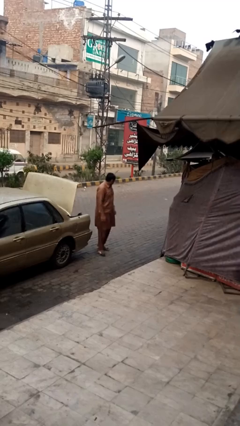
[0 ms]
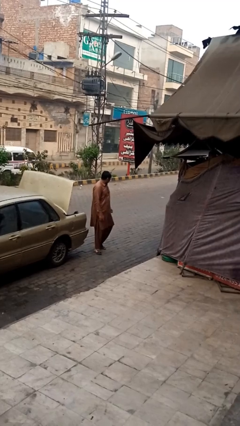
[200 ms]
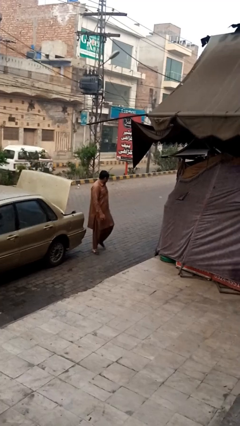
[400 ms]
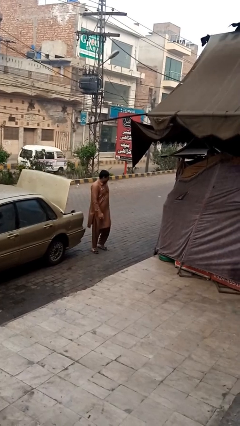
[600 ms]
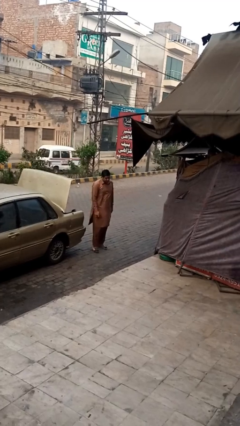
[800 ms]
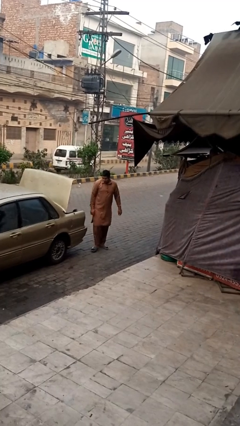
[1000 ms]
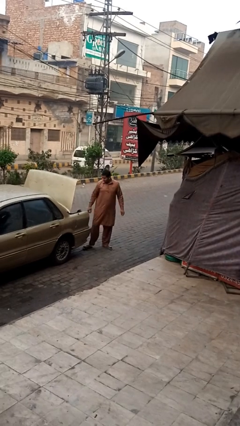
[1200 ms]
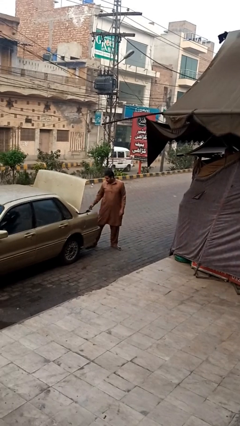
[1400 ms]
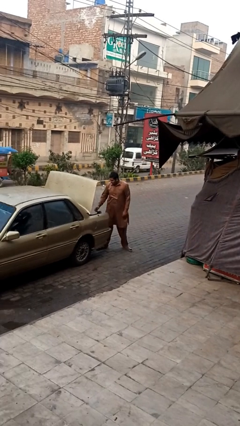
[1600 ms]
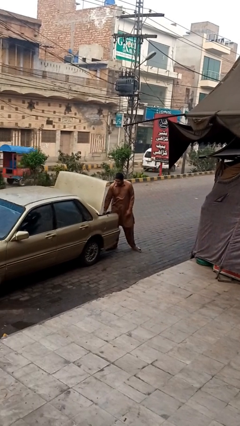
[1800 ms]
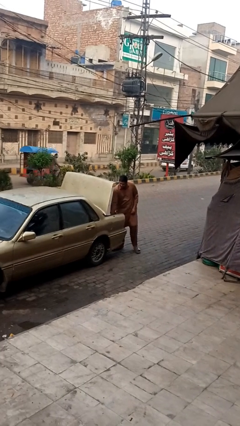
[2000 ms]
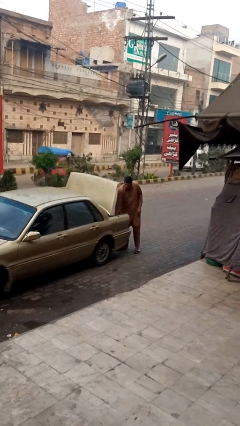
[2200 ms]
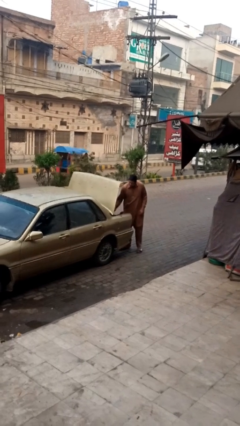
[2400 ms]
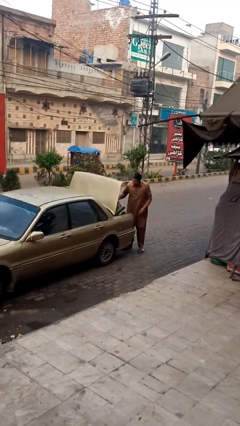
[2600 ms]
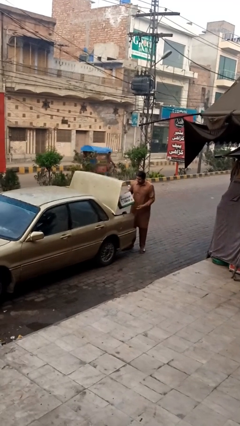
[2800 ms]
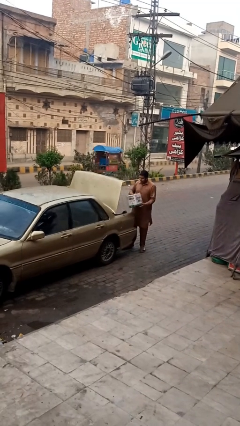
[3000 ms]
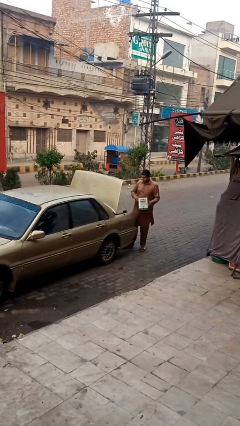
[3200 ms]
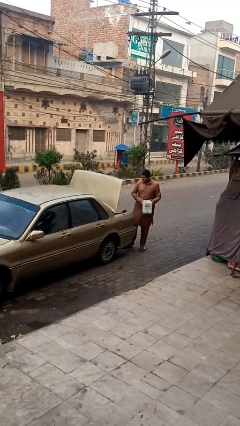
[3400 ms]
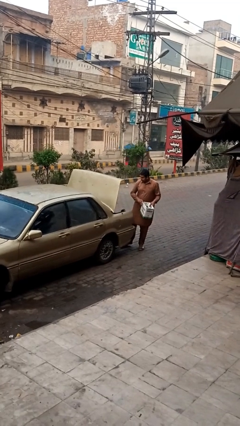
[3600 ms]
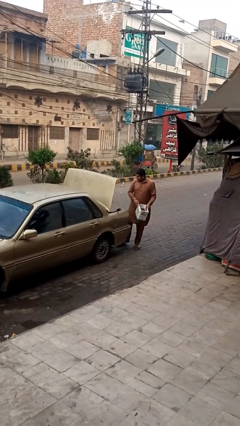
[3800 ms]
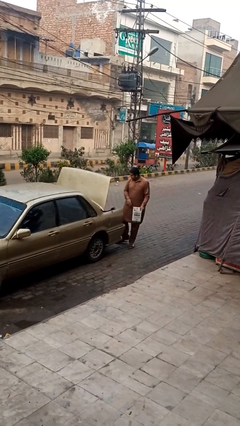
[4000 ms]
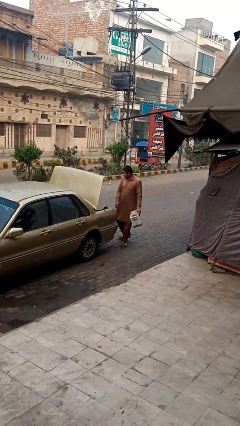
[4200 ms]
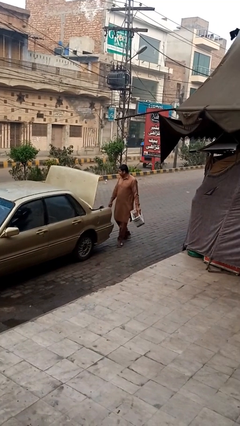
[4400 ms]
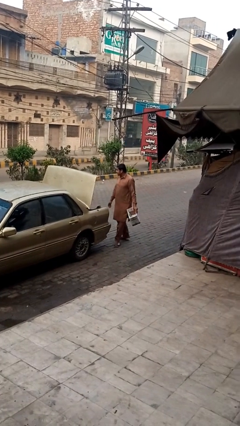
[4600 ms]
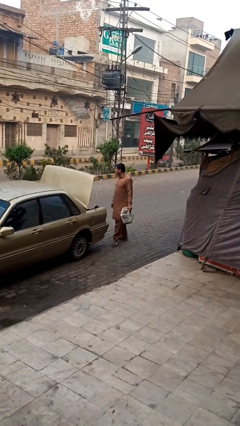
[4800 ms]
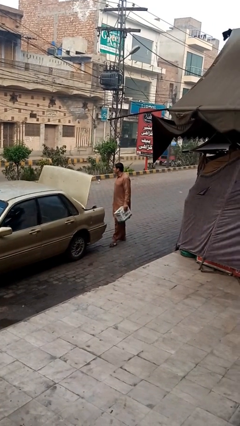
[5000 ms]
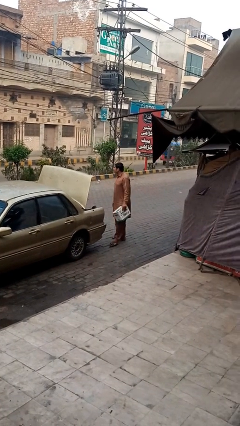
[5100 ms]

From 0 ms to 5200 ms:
person unloads car

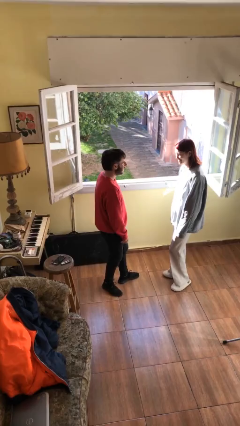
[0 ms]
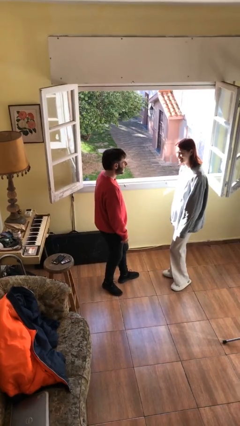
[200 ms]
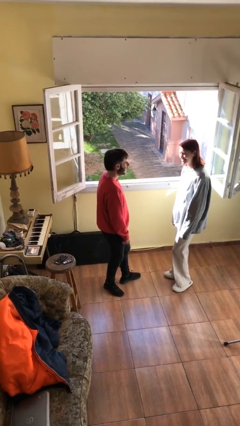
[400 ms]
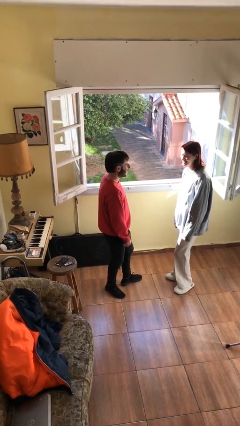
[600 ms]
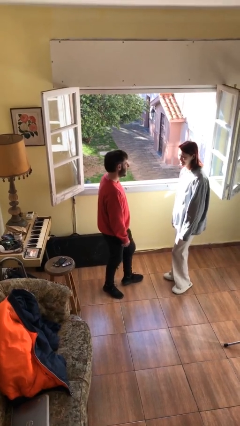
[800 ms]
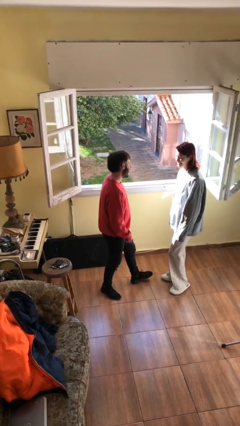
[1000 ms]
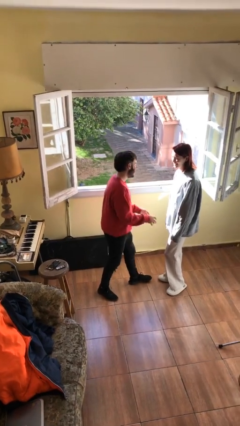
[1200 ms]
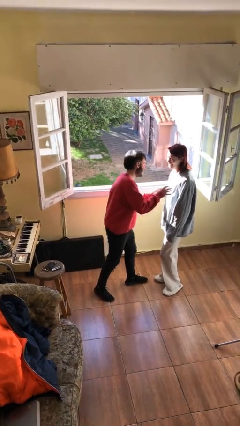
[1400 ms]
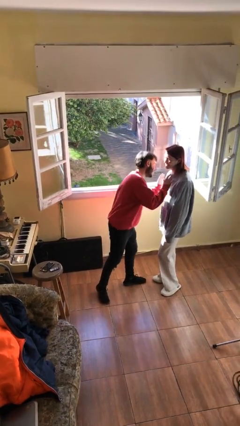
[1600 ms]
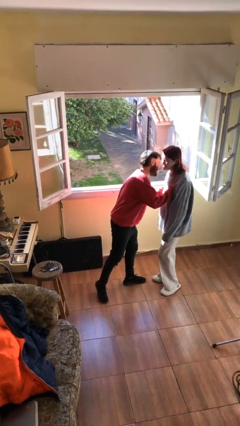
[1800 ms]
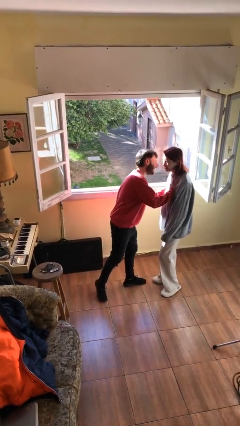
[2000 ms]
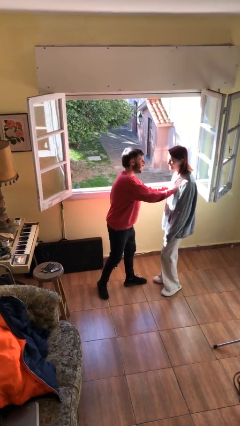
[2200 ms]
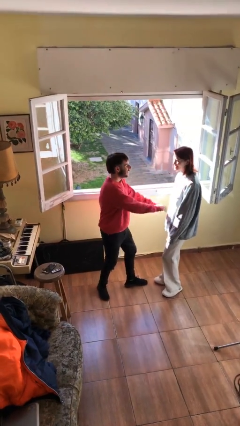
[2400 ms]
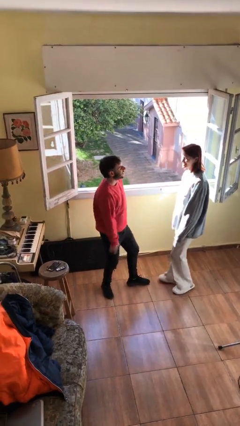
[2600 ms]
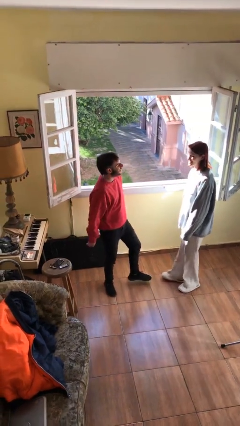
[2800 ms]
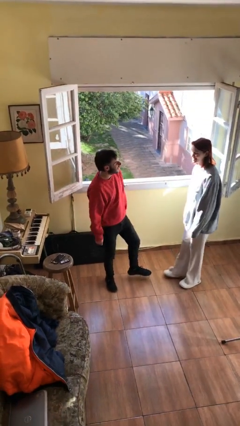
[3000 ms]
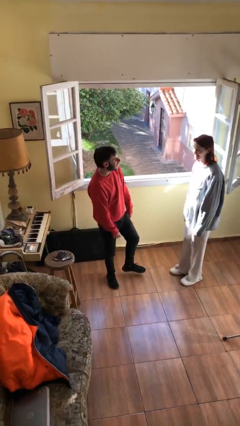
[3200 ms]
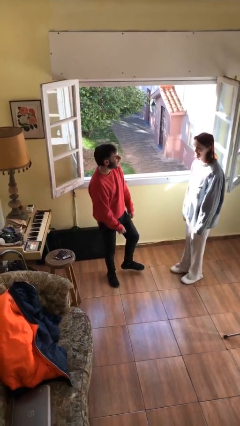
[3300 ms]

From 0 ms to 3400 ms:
person shoves person

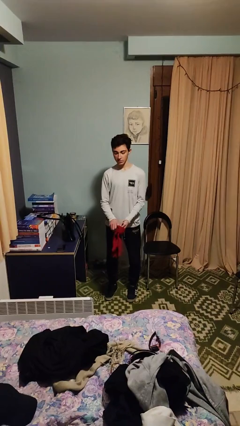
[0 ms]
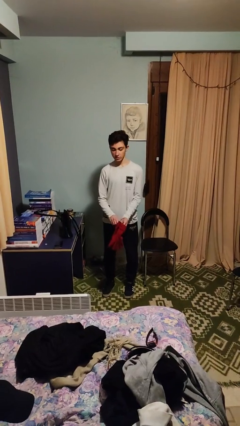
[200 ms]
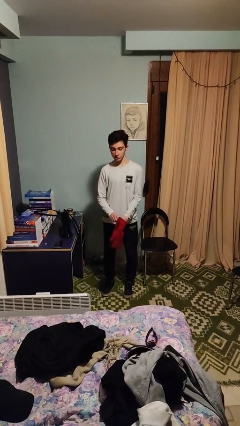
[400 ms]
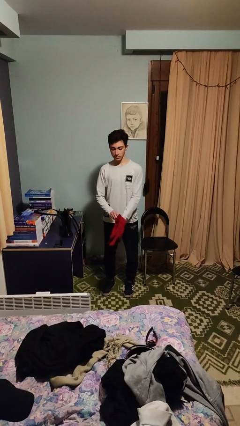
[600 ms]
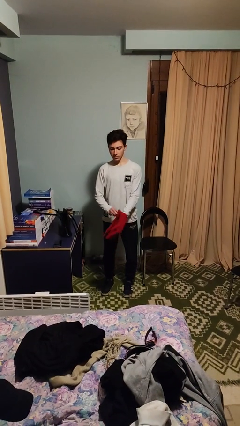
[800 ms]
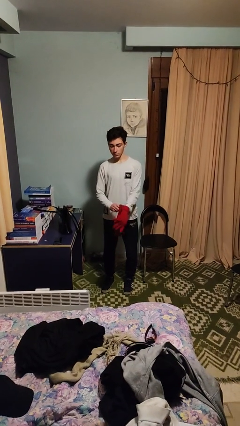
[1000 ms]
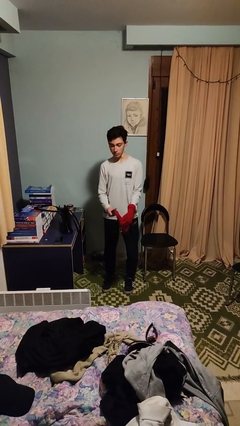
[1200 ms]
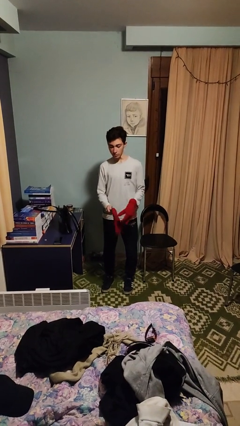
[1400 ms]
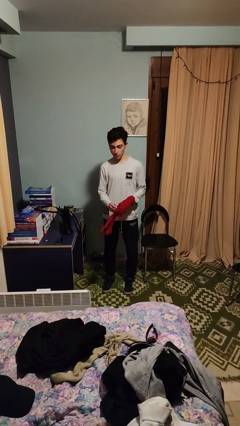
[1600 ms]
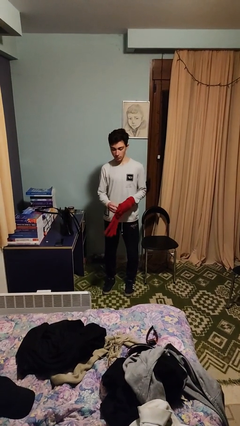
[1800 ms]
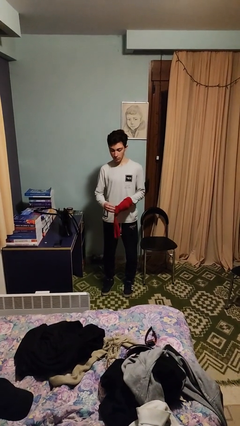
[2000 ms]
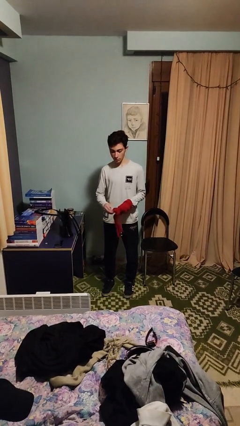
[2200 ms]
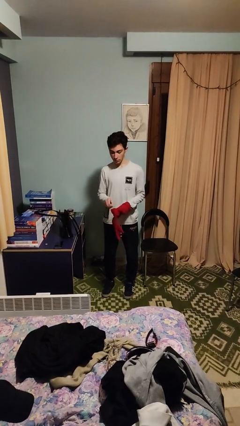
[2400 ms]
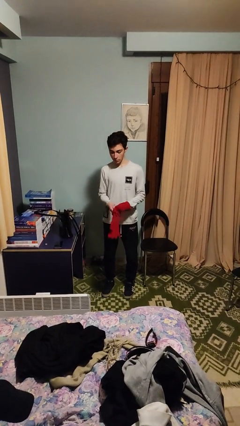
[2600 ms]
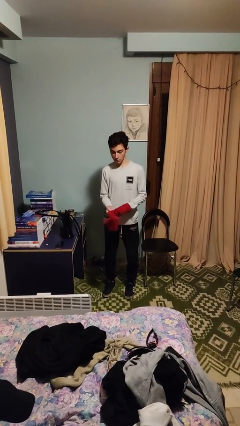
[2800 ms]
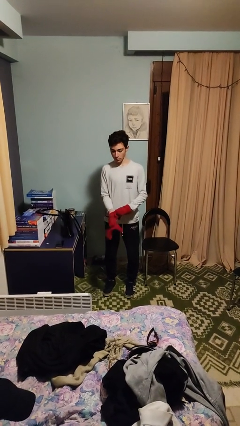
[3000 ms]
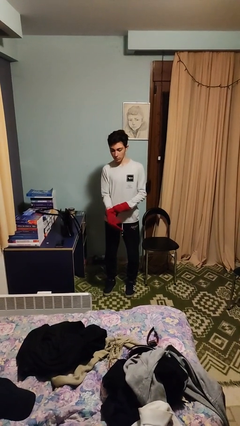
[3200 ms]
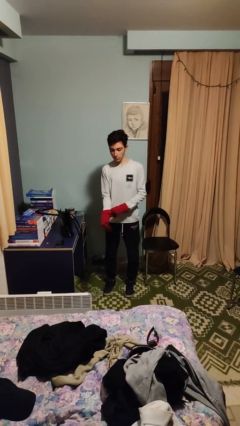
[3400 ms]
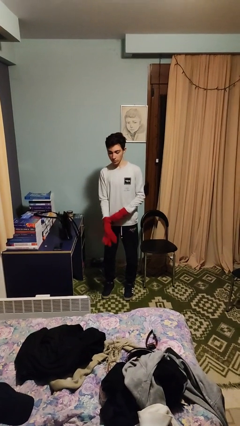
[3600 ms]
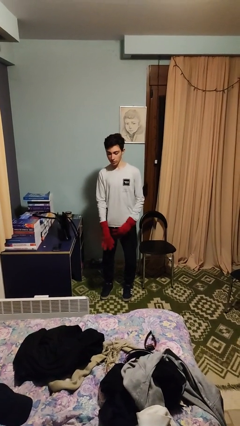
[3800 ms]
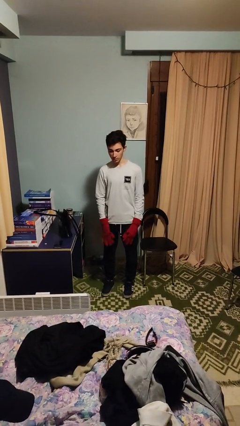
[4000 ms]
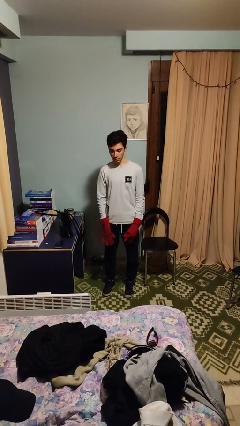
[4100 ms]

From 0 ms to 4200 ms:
person puts on gloves

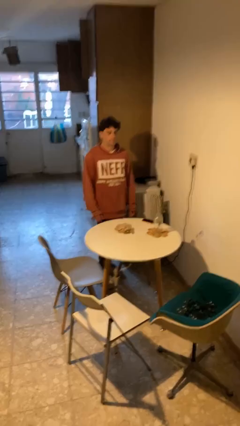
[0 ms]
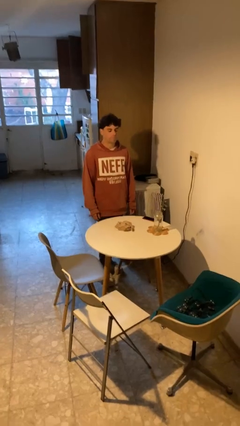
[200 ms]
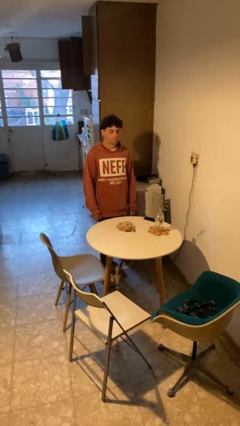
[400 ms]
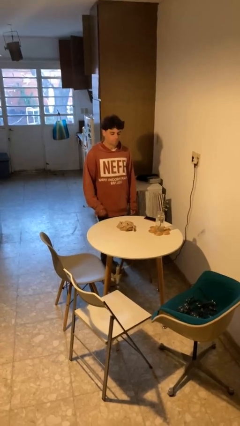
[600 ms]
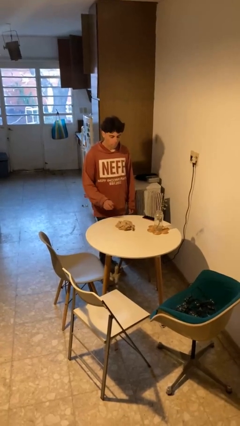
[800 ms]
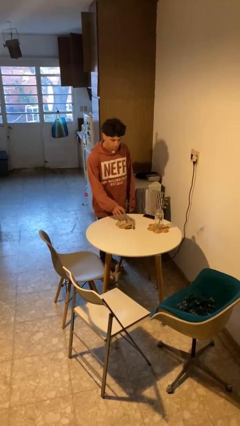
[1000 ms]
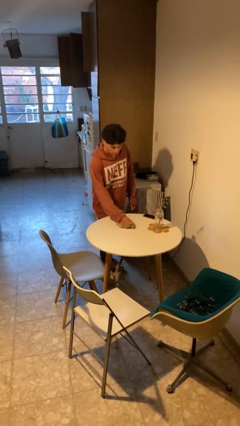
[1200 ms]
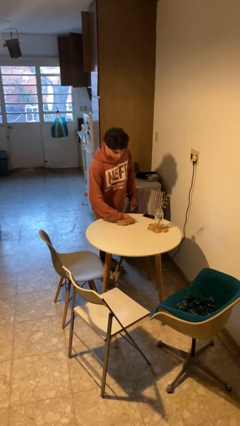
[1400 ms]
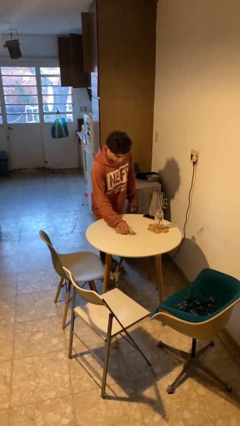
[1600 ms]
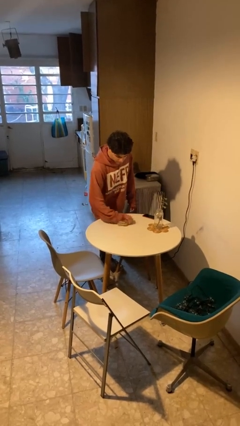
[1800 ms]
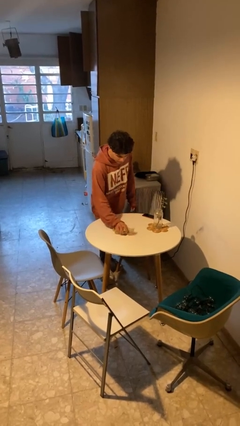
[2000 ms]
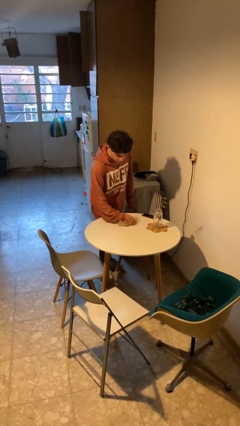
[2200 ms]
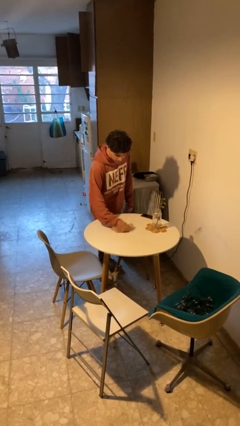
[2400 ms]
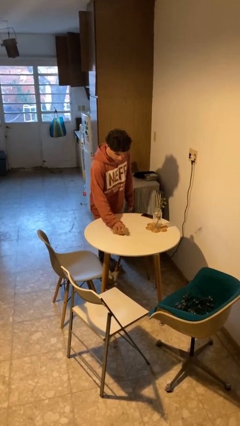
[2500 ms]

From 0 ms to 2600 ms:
person cleans table with rag

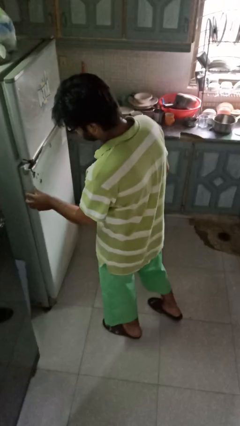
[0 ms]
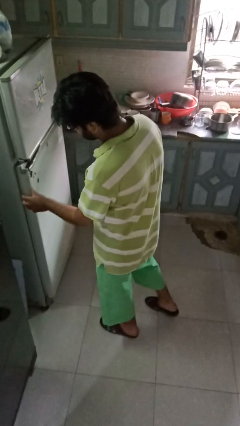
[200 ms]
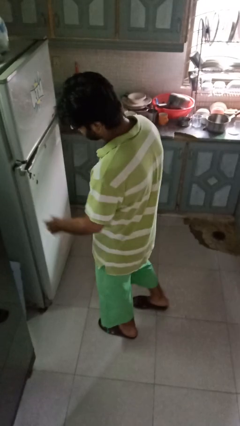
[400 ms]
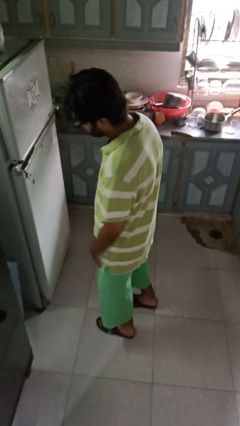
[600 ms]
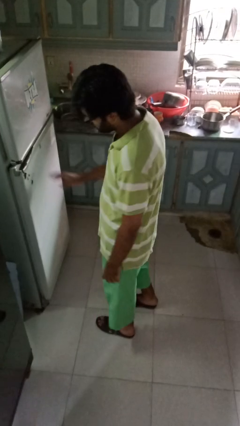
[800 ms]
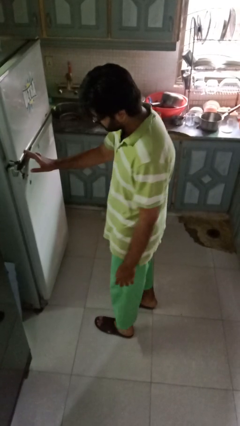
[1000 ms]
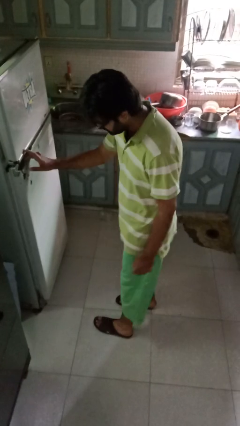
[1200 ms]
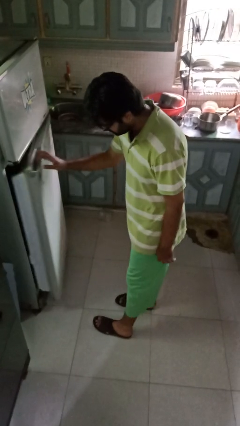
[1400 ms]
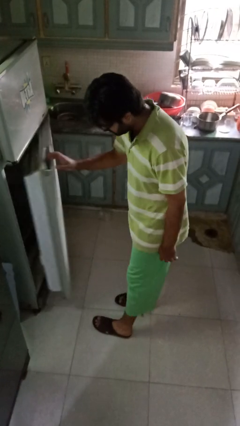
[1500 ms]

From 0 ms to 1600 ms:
person opens refrigerator

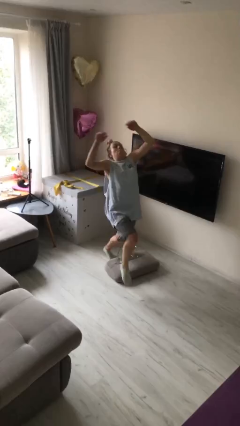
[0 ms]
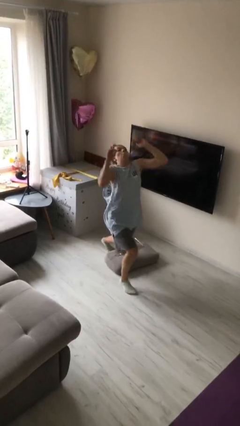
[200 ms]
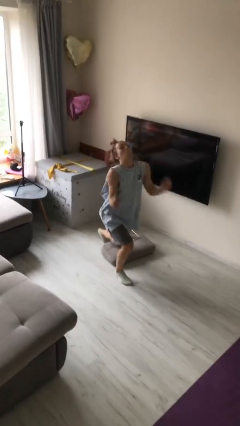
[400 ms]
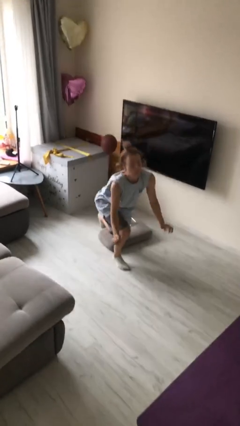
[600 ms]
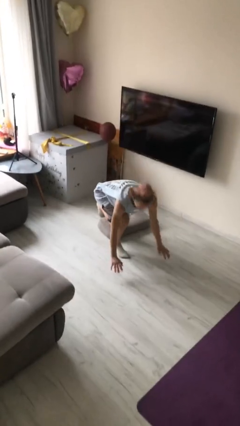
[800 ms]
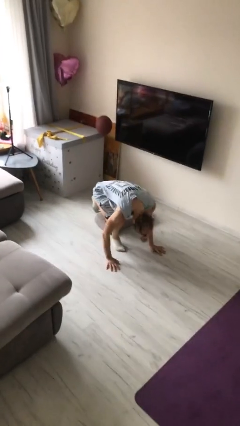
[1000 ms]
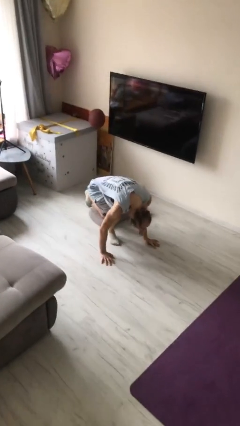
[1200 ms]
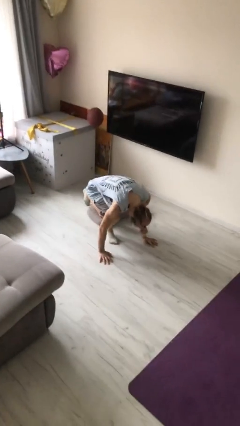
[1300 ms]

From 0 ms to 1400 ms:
person trips on object on floor
